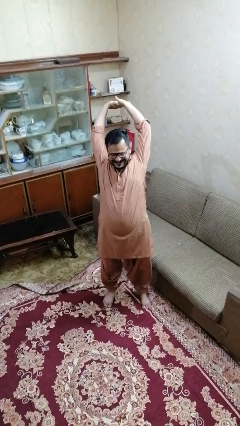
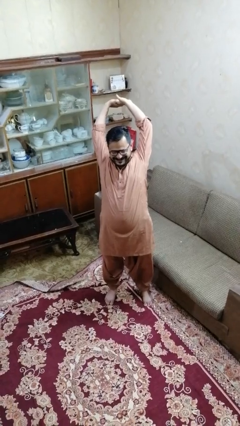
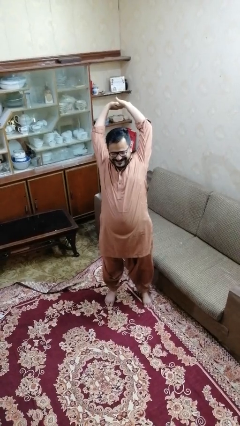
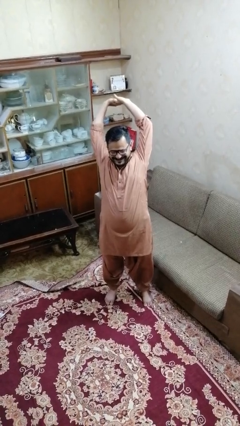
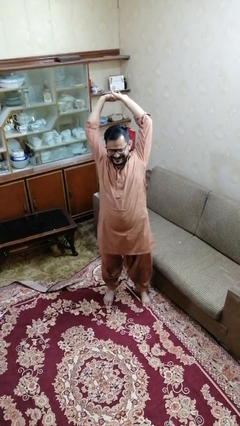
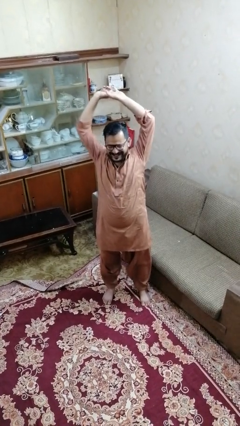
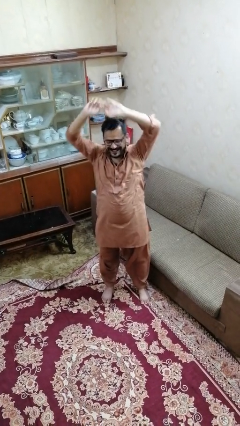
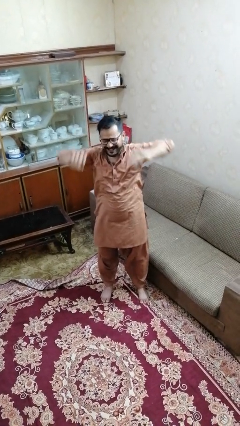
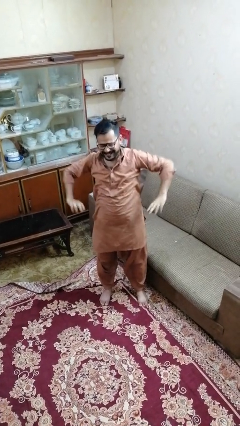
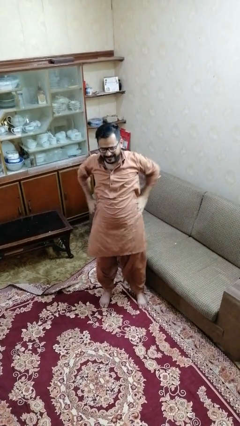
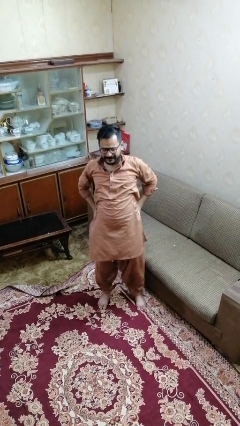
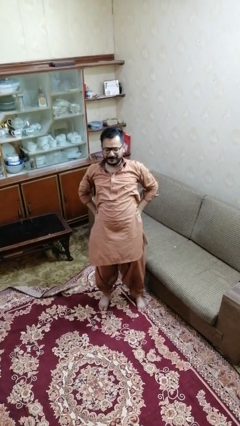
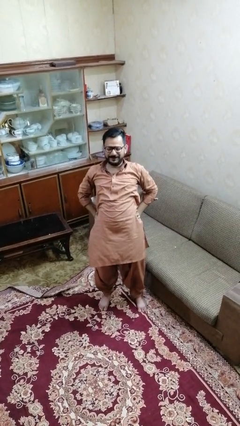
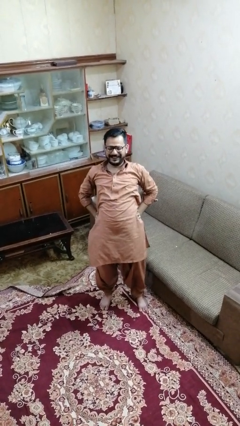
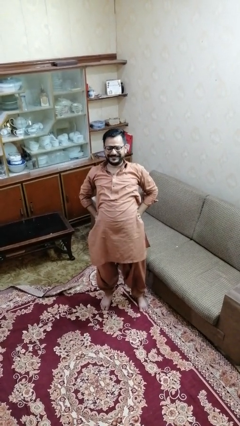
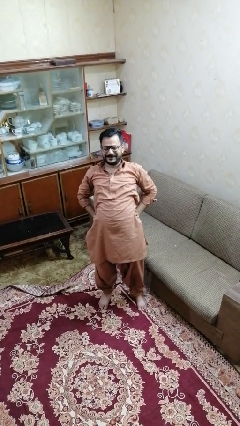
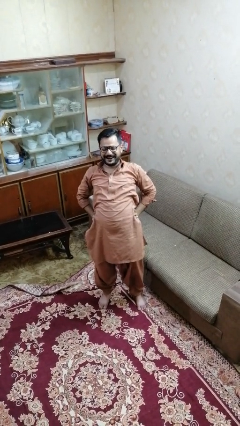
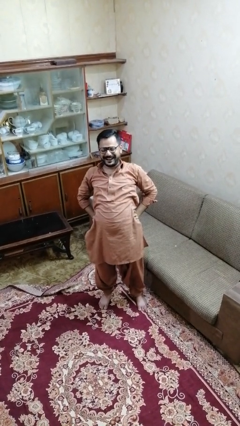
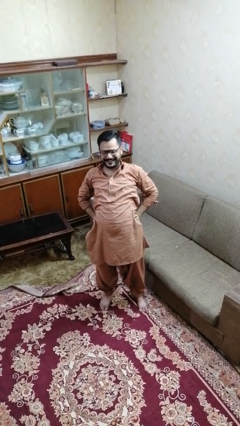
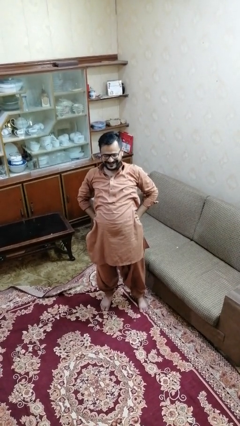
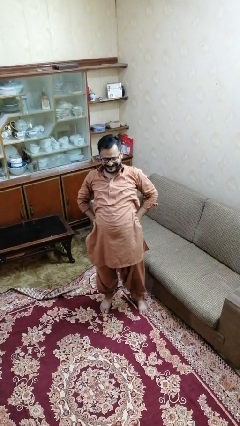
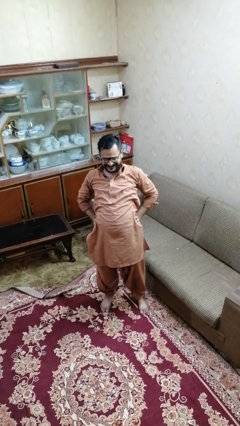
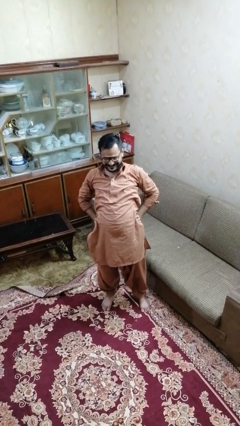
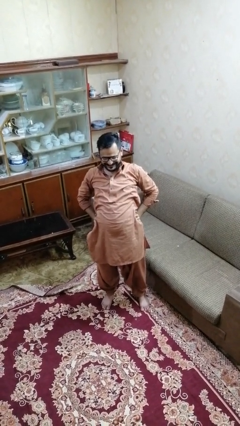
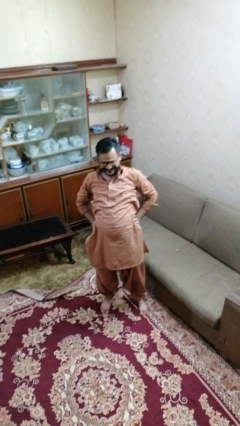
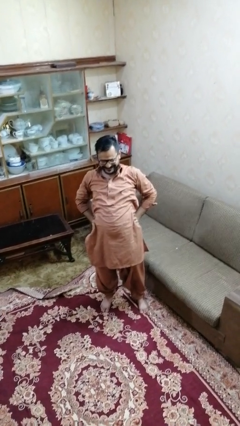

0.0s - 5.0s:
person stretches back

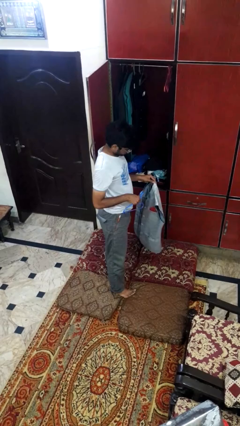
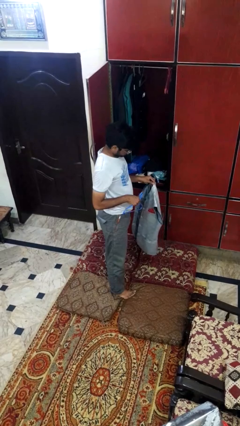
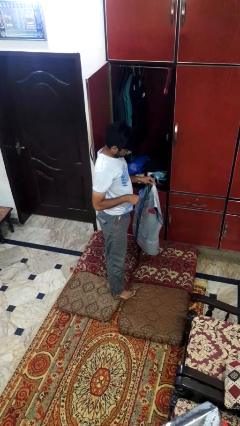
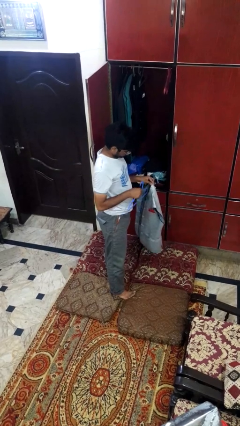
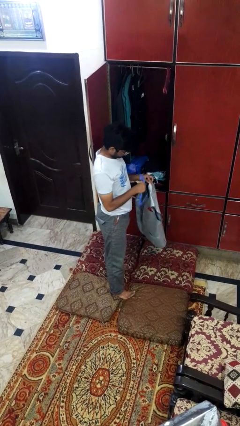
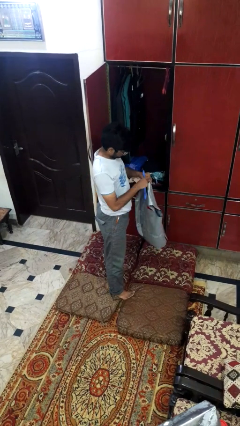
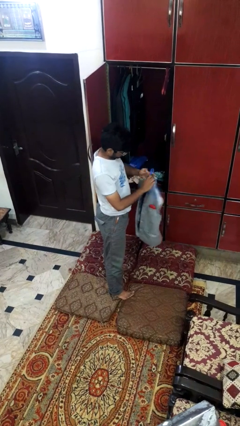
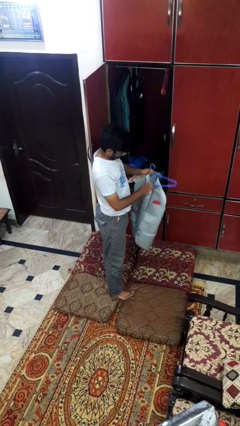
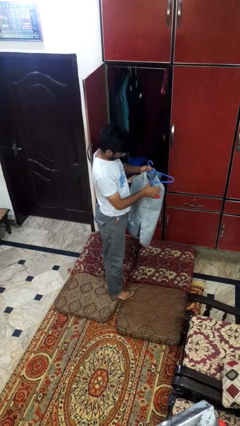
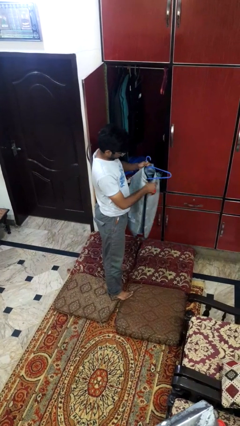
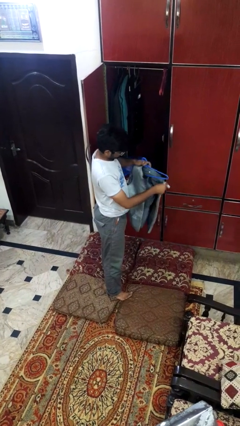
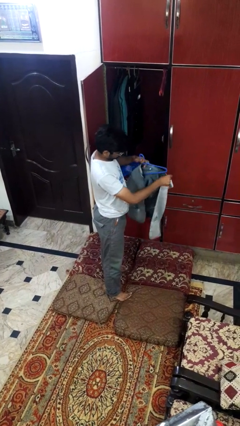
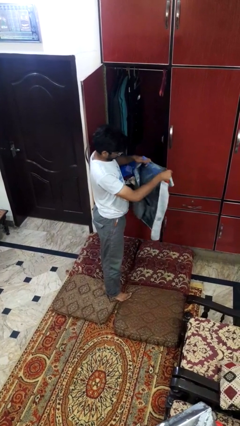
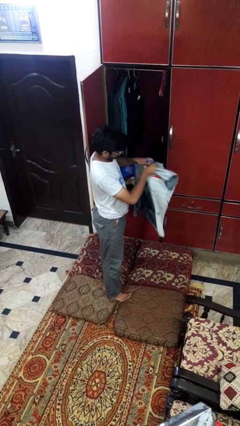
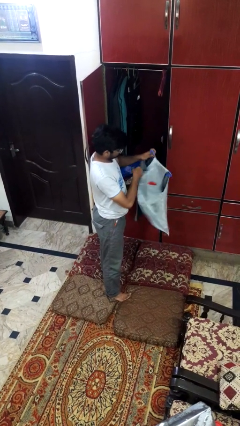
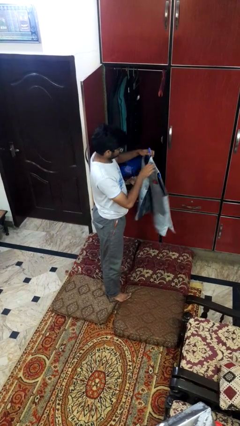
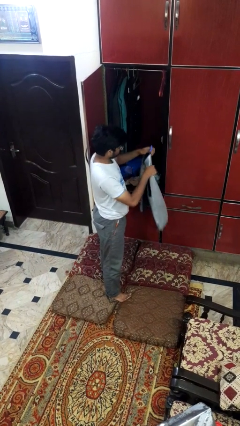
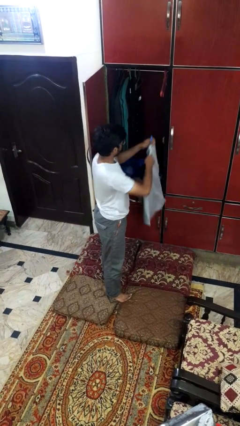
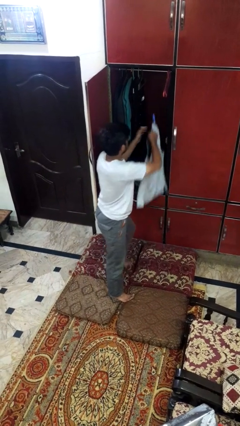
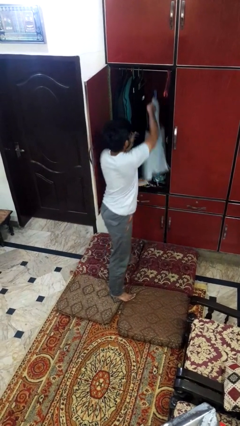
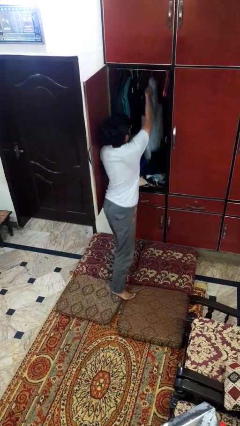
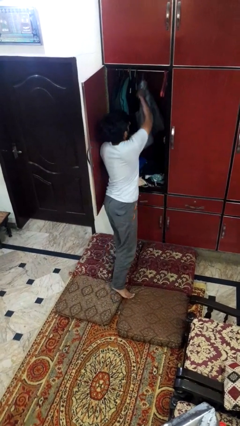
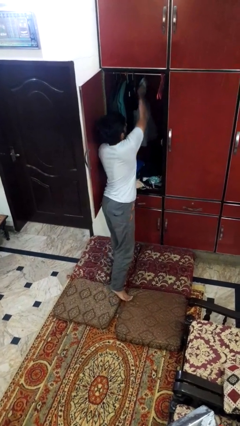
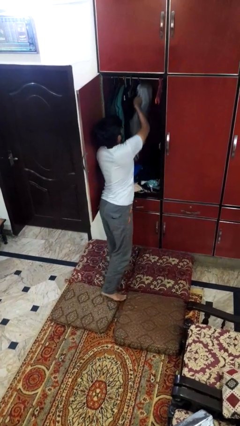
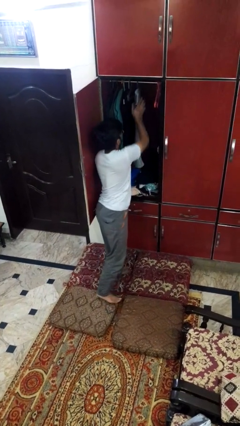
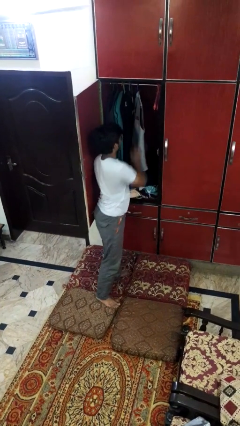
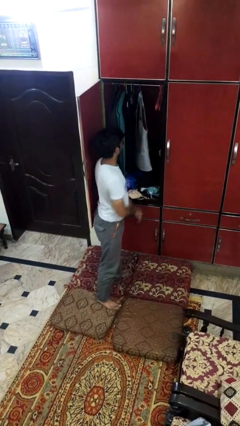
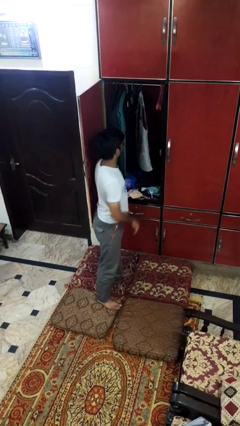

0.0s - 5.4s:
person puts clothes into closet

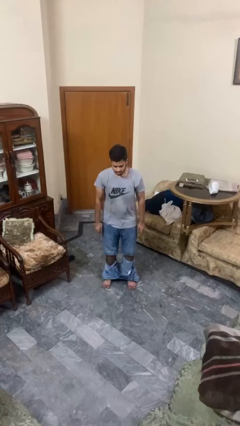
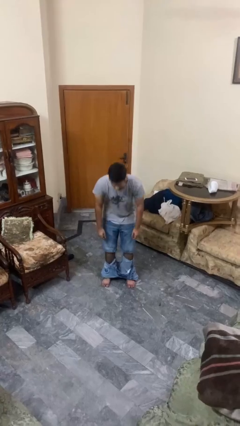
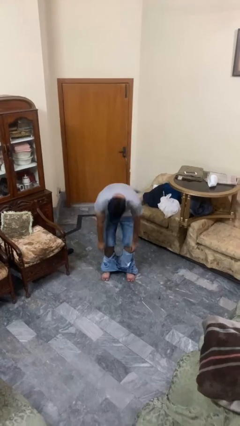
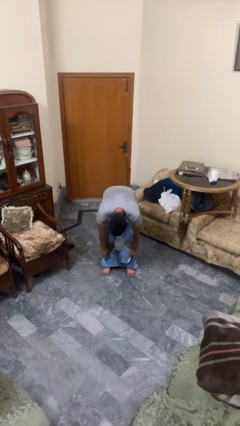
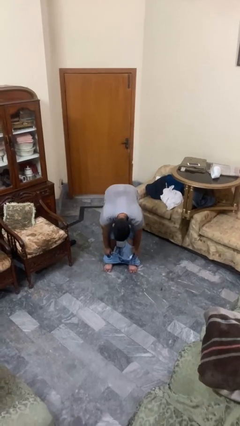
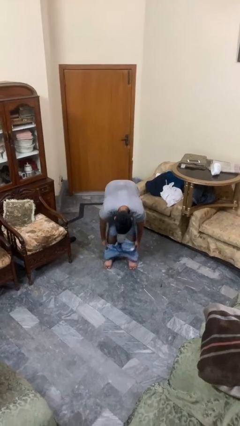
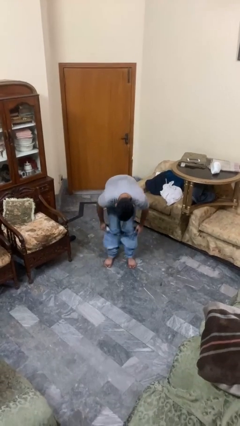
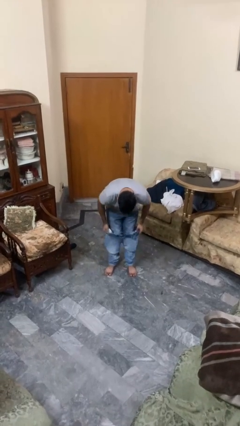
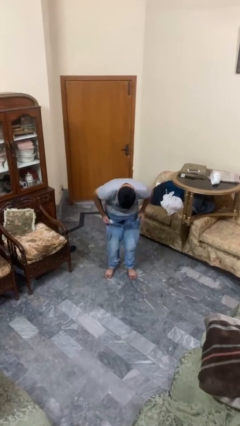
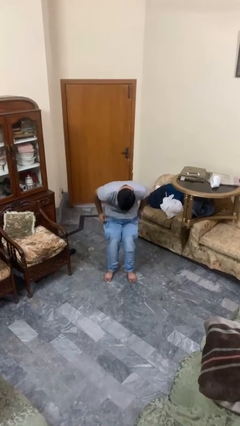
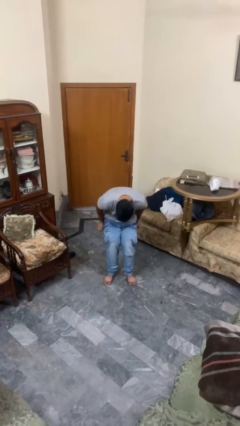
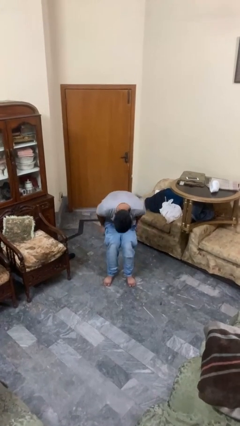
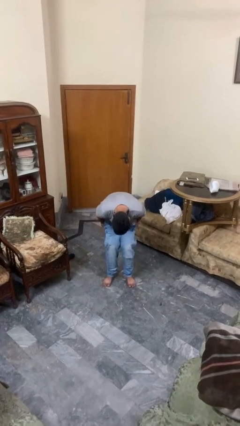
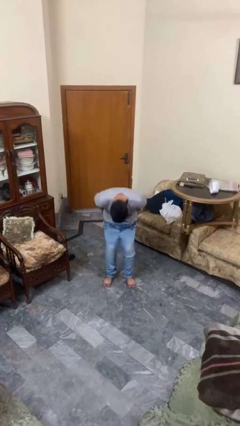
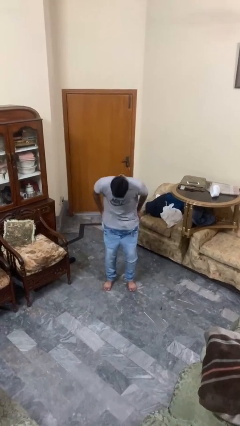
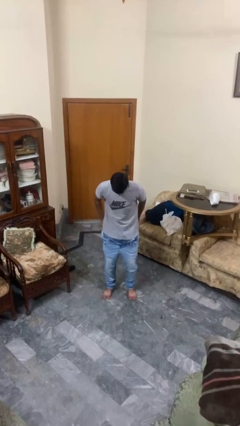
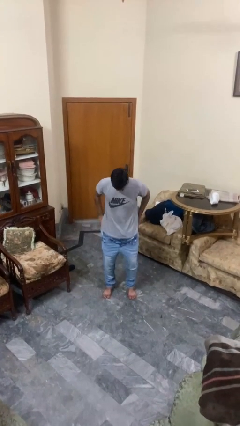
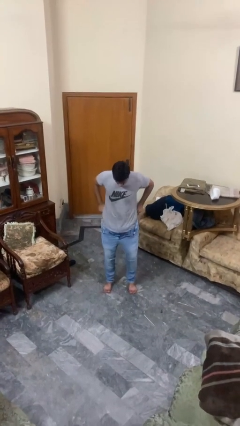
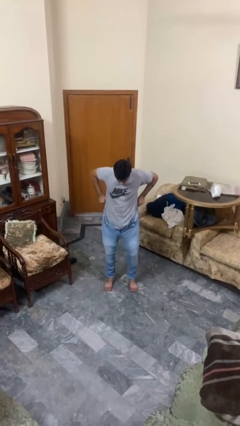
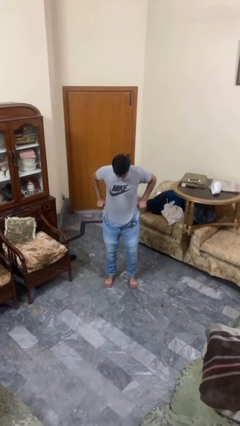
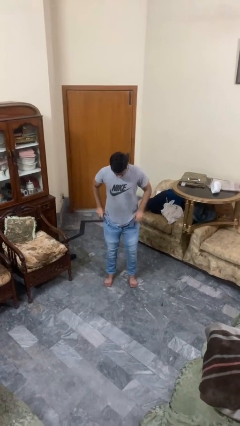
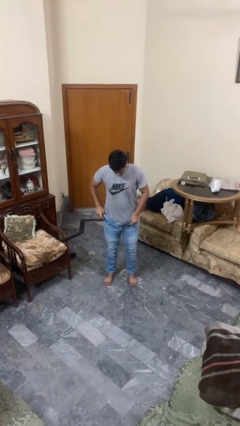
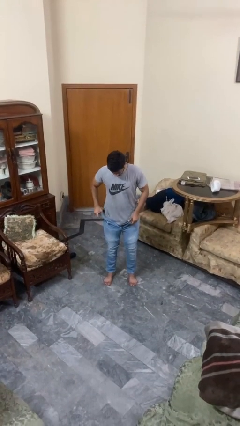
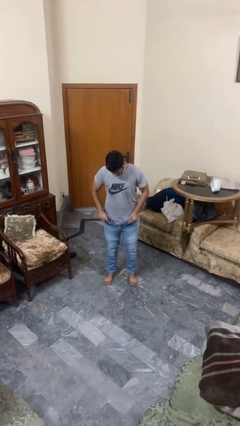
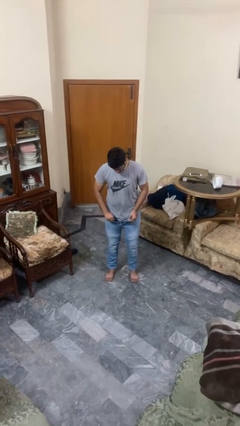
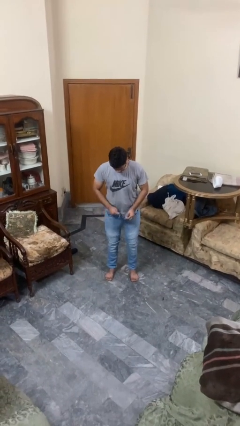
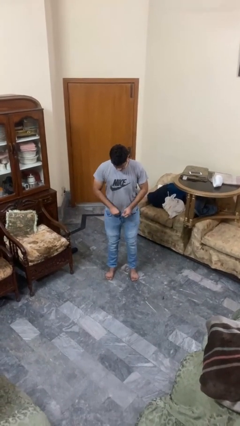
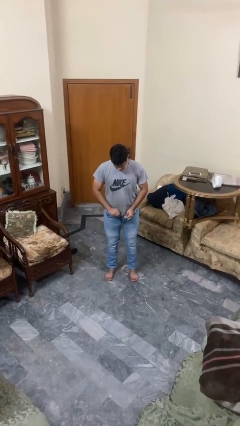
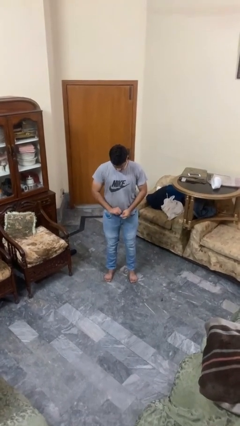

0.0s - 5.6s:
person puts on pants

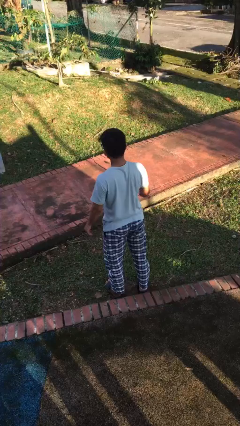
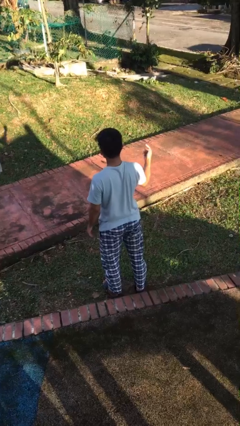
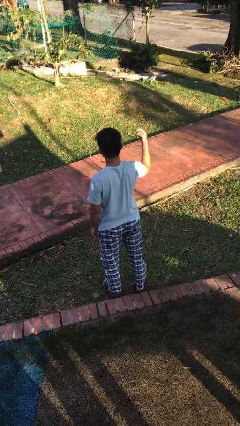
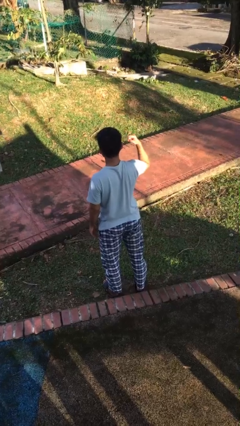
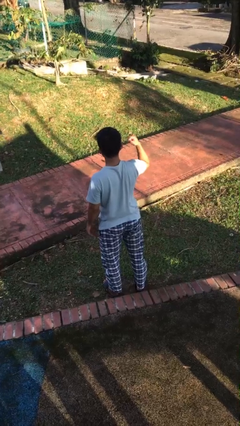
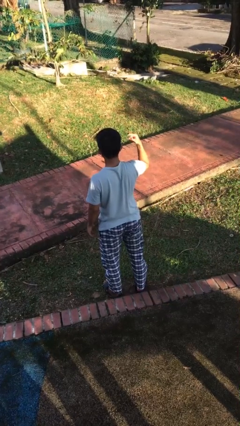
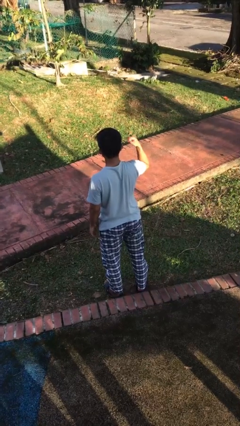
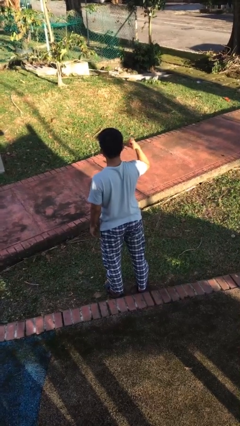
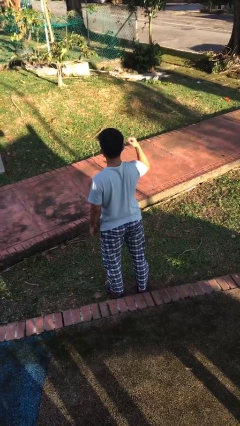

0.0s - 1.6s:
person gestures listen closely
